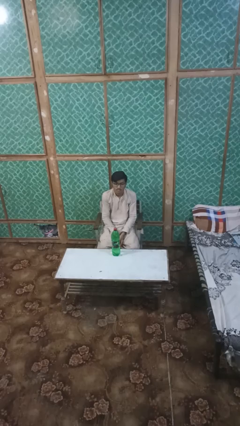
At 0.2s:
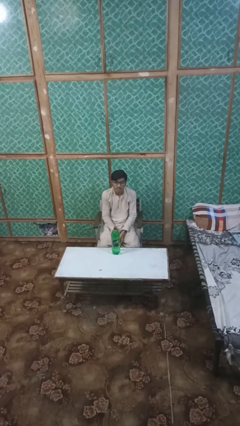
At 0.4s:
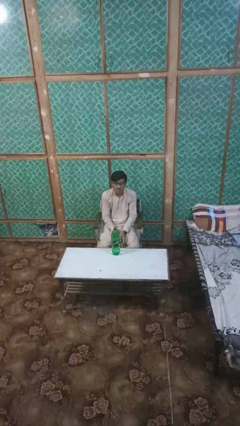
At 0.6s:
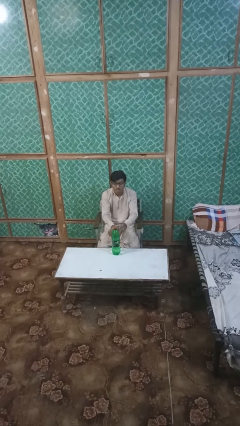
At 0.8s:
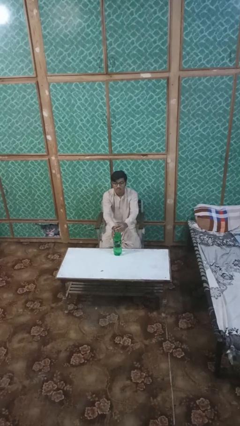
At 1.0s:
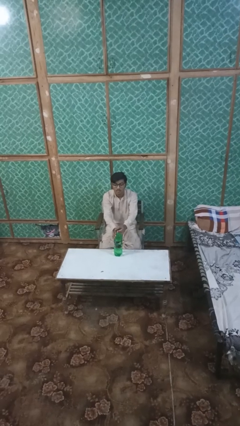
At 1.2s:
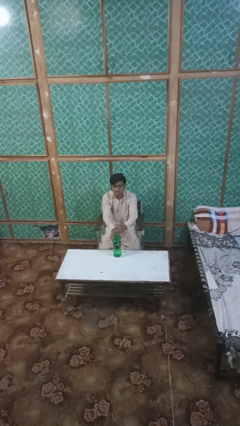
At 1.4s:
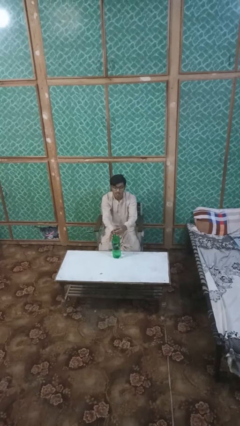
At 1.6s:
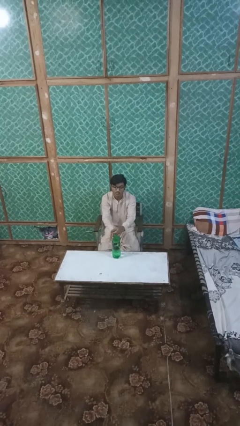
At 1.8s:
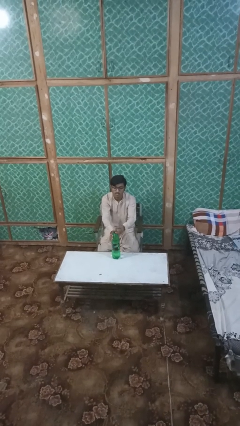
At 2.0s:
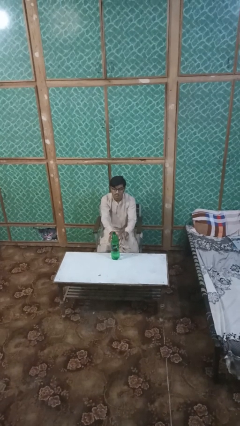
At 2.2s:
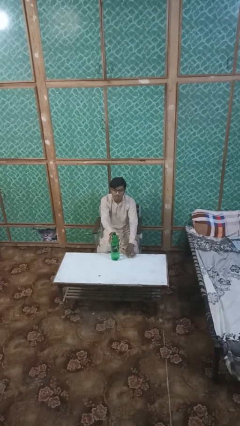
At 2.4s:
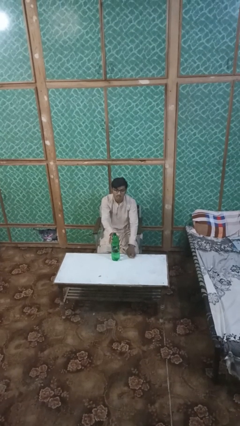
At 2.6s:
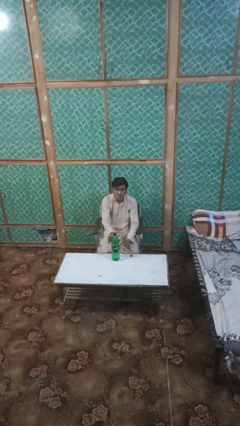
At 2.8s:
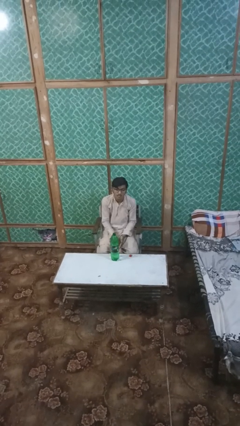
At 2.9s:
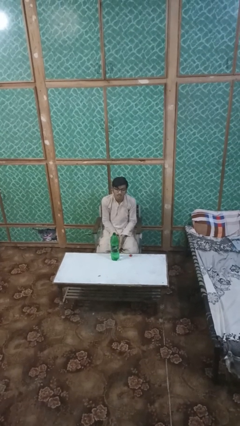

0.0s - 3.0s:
person unscrews lid from bottle

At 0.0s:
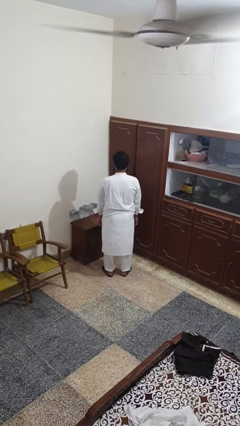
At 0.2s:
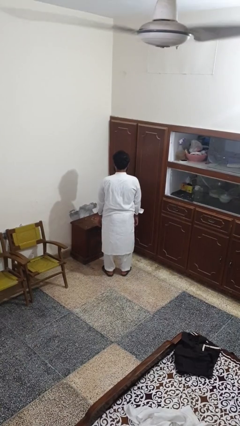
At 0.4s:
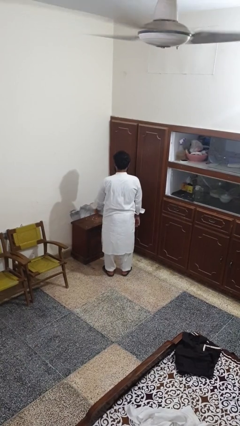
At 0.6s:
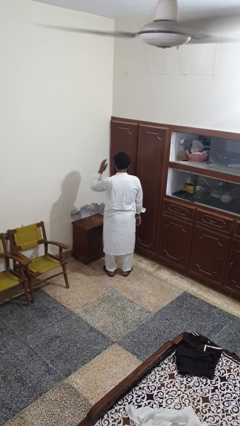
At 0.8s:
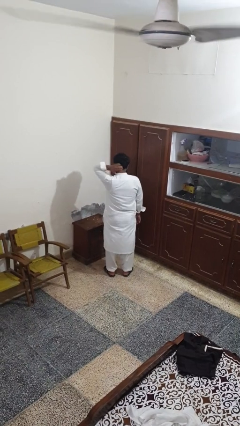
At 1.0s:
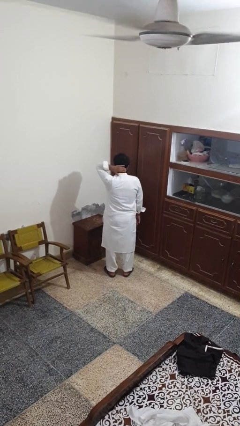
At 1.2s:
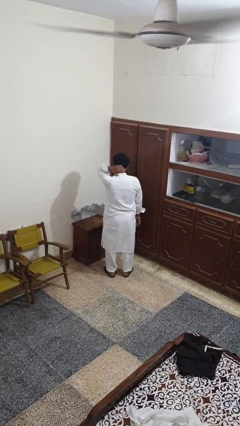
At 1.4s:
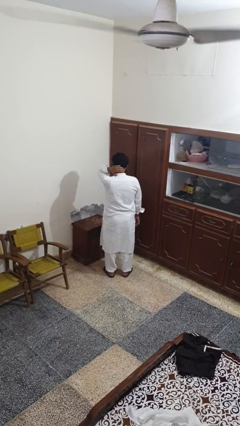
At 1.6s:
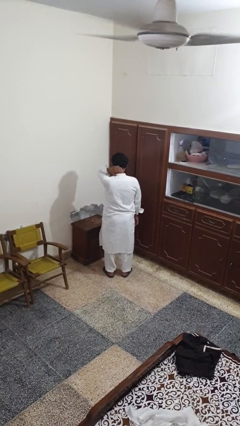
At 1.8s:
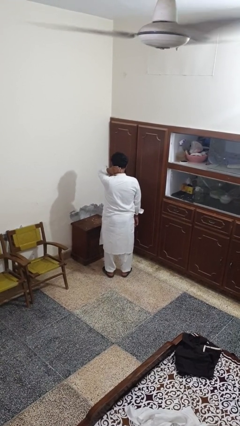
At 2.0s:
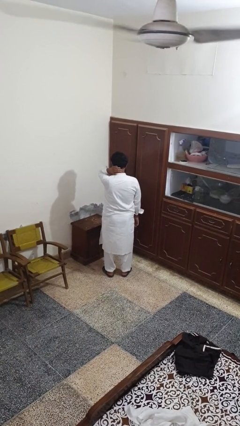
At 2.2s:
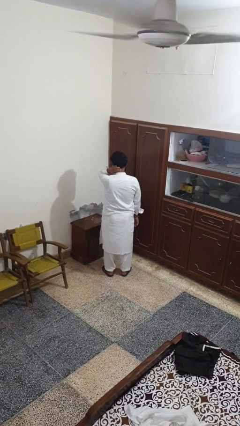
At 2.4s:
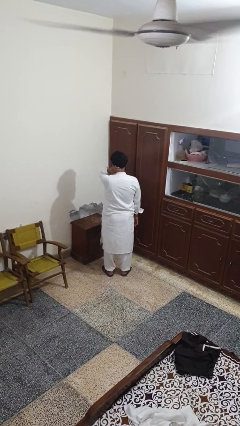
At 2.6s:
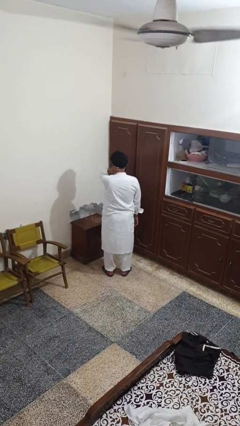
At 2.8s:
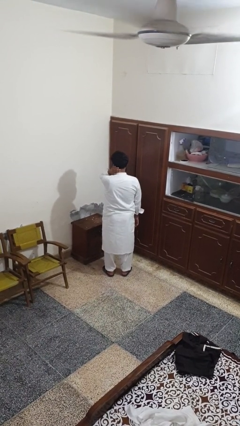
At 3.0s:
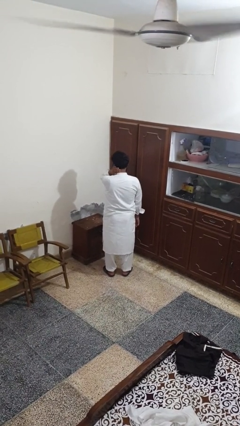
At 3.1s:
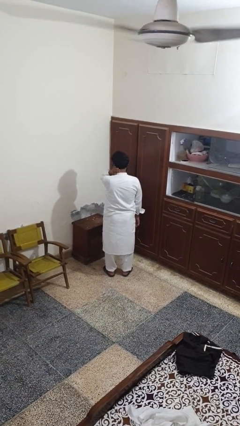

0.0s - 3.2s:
person rubs neck

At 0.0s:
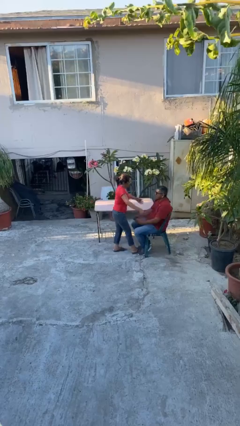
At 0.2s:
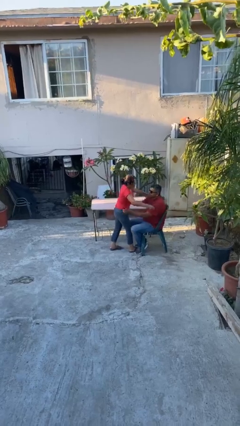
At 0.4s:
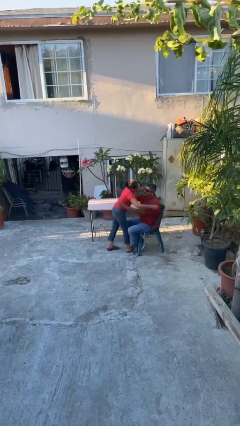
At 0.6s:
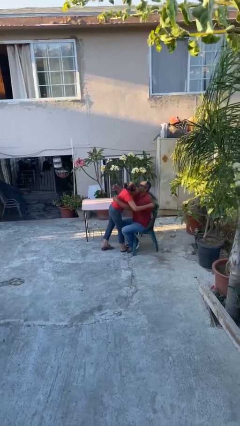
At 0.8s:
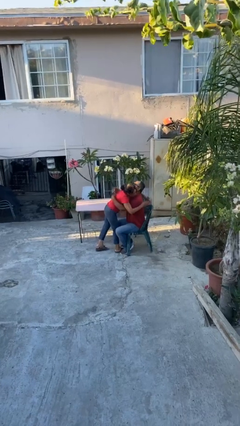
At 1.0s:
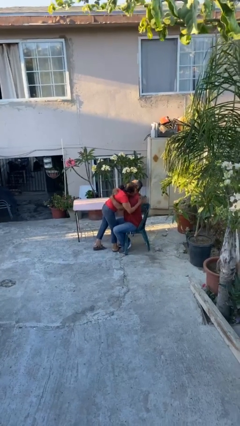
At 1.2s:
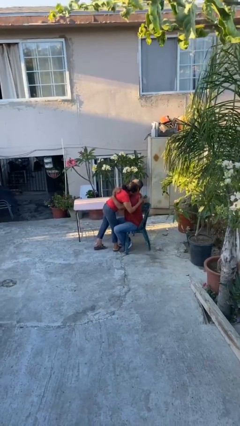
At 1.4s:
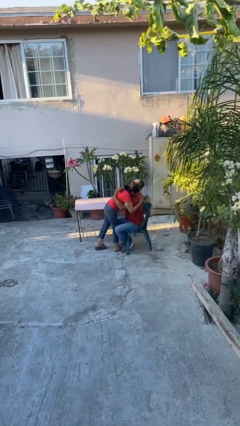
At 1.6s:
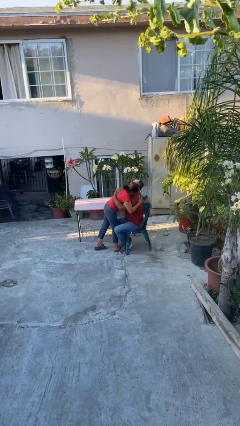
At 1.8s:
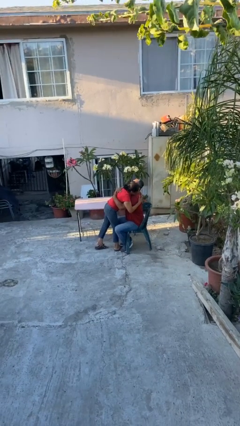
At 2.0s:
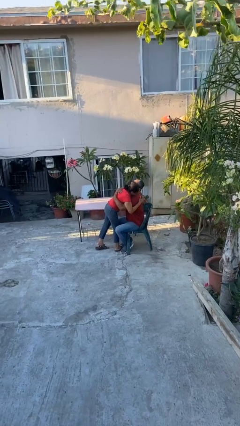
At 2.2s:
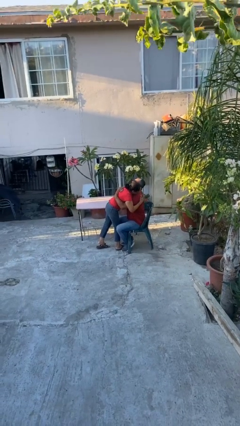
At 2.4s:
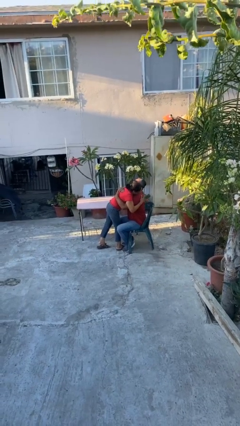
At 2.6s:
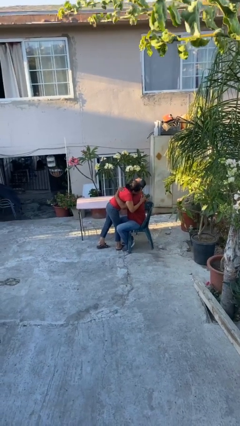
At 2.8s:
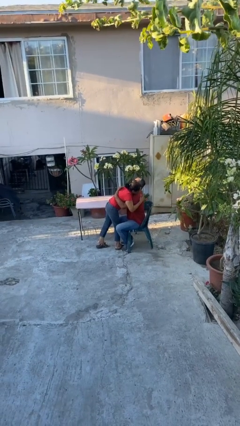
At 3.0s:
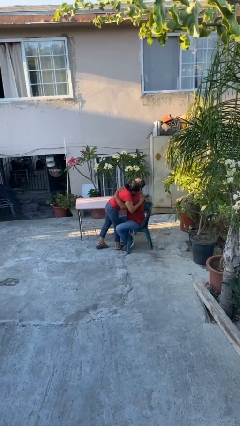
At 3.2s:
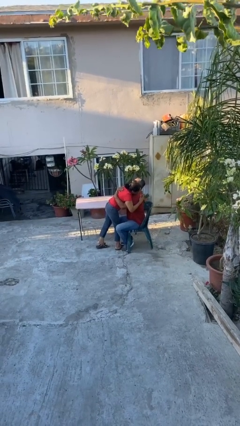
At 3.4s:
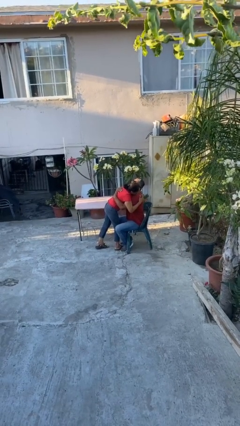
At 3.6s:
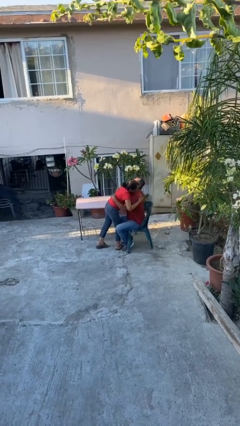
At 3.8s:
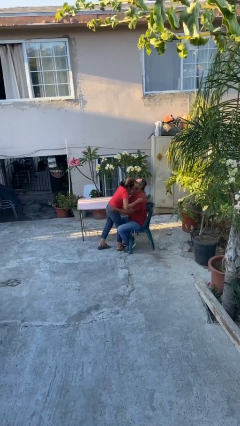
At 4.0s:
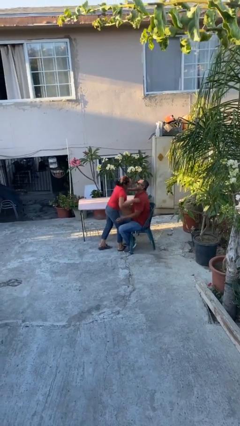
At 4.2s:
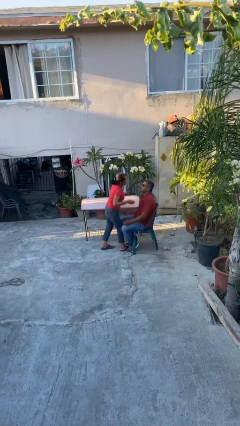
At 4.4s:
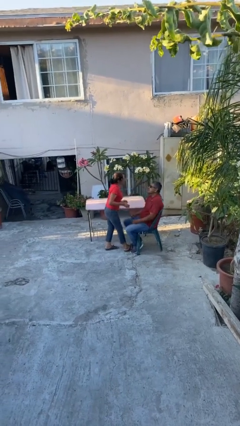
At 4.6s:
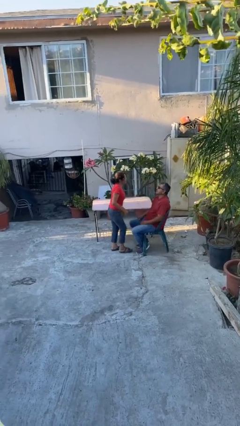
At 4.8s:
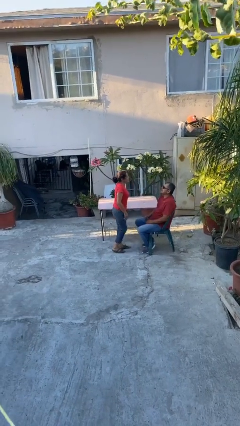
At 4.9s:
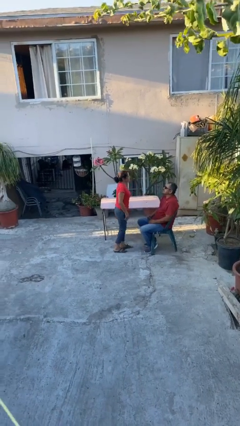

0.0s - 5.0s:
person embraces person

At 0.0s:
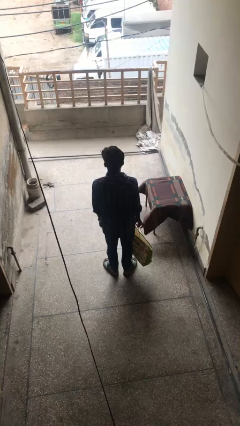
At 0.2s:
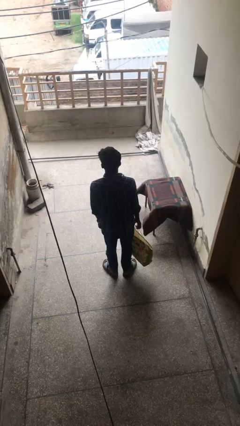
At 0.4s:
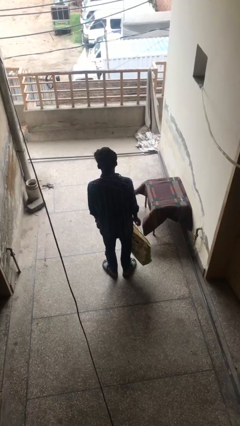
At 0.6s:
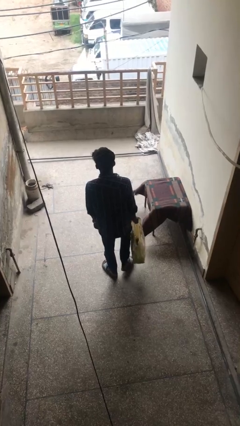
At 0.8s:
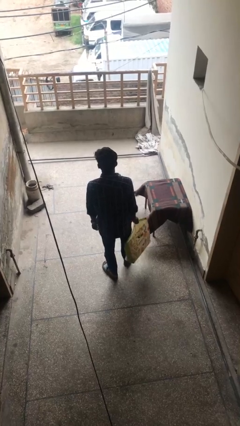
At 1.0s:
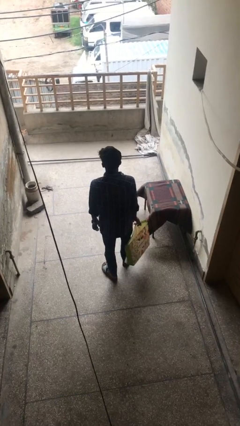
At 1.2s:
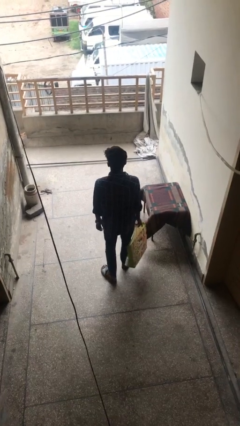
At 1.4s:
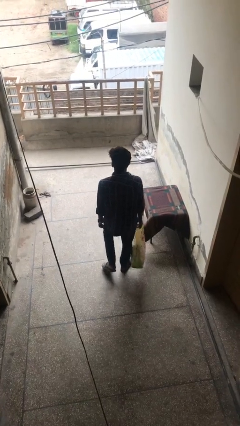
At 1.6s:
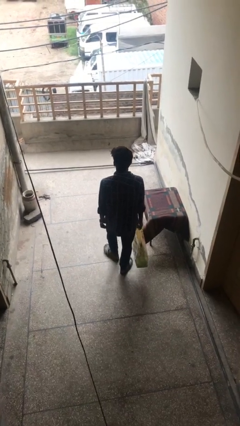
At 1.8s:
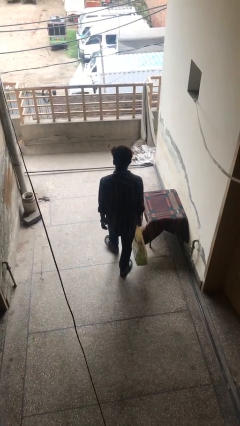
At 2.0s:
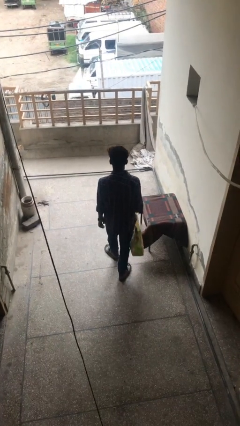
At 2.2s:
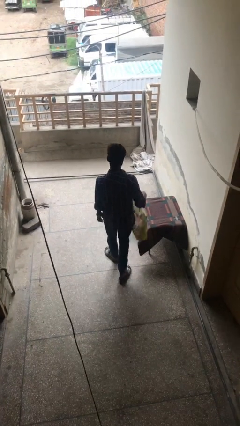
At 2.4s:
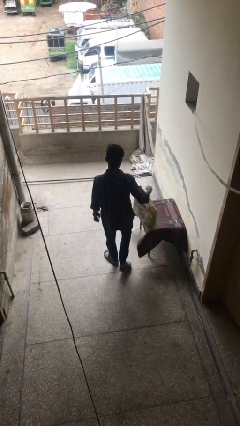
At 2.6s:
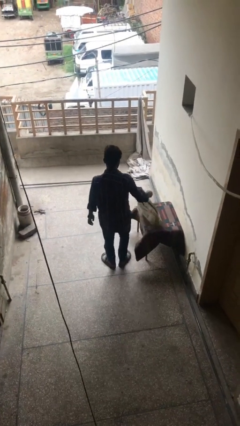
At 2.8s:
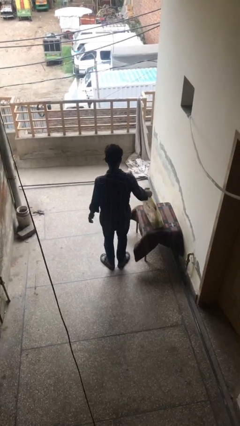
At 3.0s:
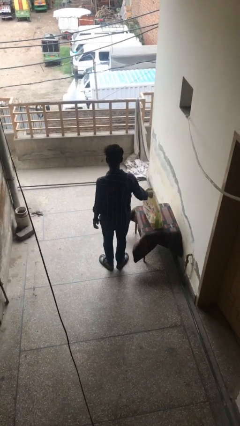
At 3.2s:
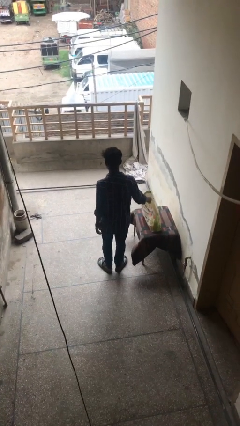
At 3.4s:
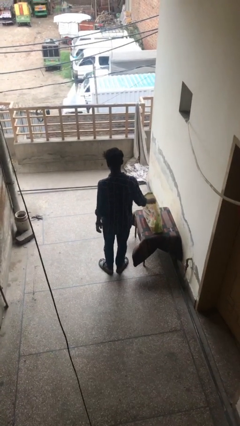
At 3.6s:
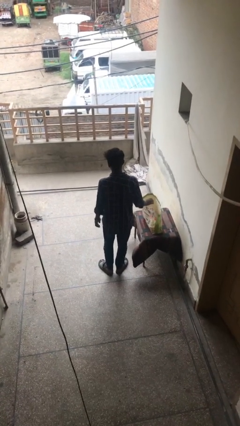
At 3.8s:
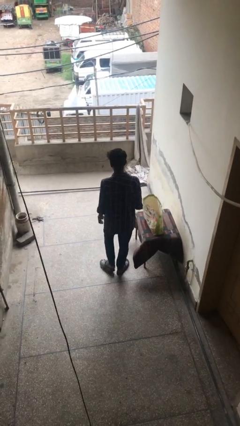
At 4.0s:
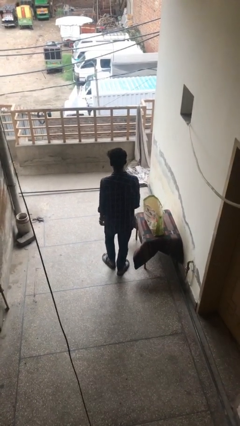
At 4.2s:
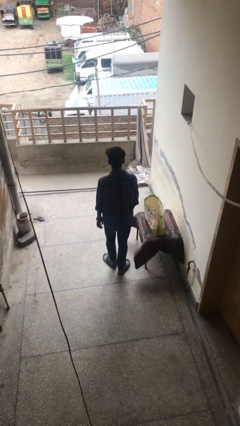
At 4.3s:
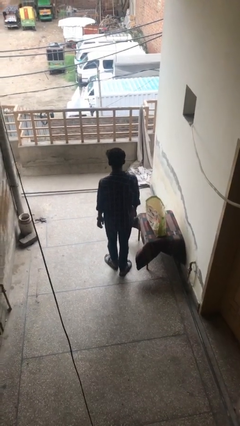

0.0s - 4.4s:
person puts down object on table

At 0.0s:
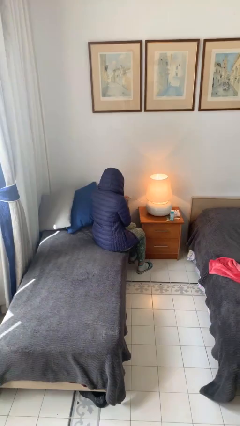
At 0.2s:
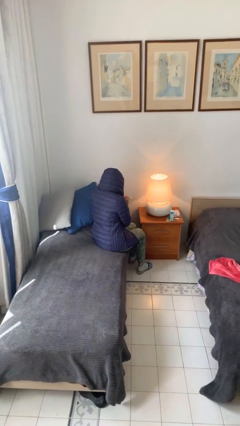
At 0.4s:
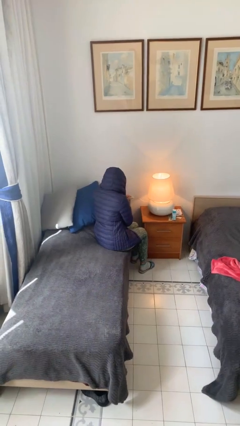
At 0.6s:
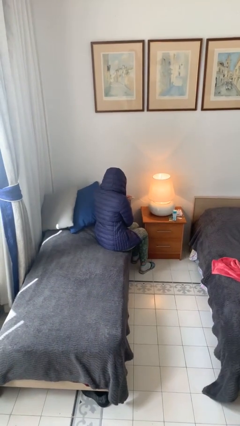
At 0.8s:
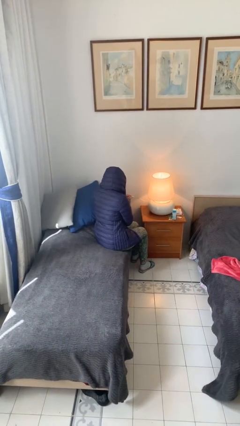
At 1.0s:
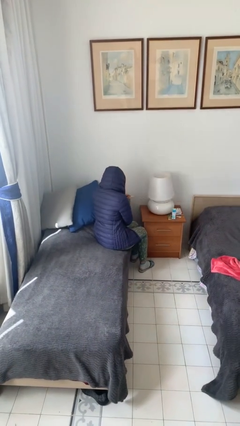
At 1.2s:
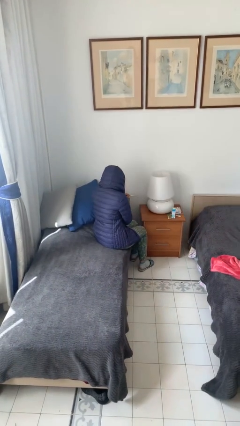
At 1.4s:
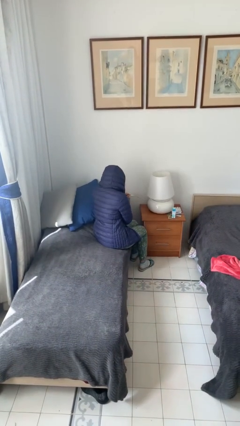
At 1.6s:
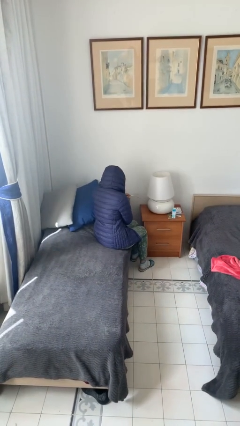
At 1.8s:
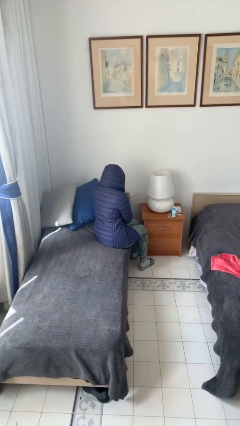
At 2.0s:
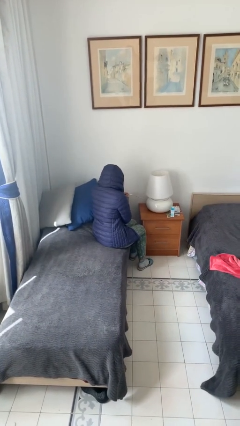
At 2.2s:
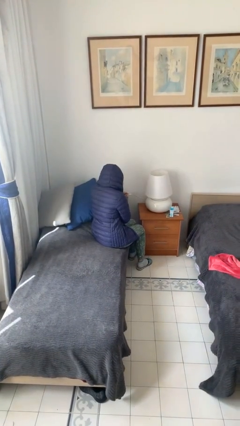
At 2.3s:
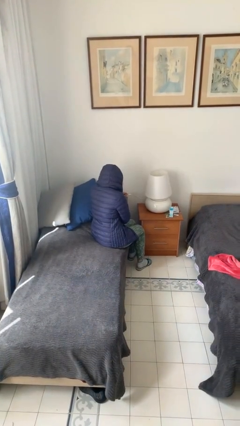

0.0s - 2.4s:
person turns off lamp
